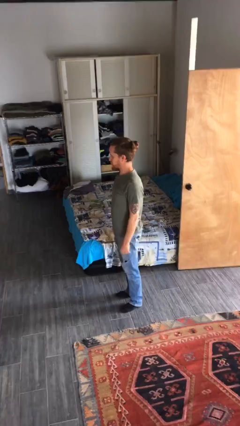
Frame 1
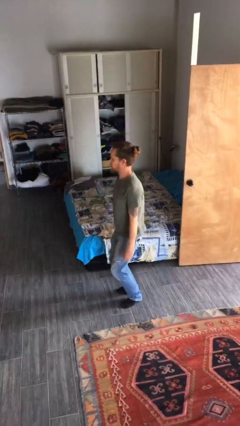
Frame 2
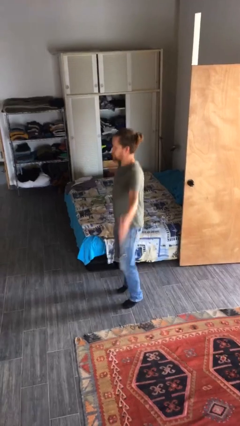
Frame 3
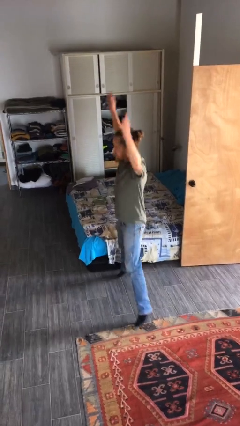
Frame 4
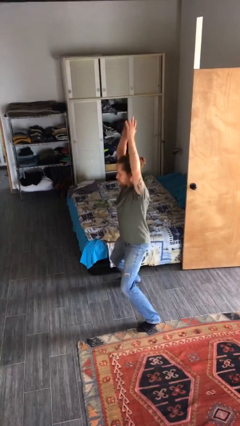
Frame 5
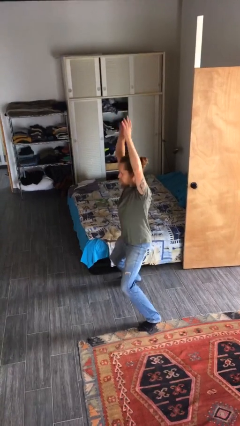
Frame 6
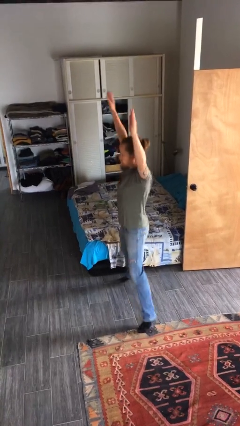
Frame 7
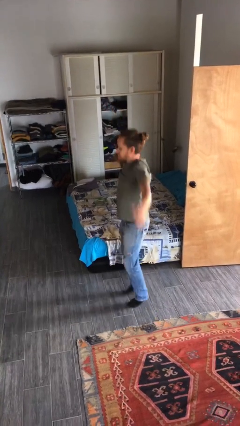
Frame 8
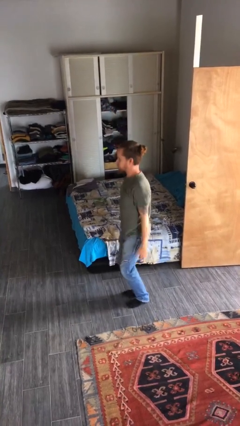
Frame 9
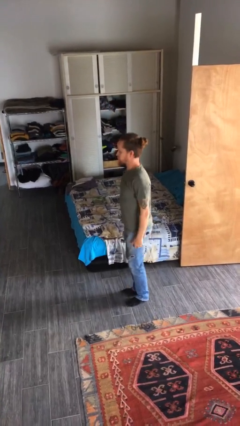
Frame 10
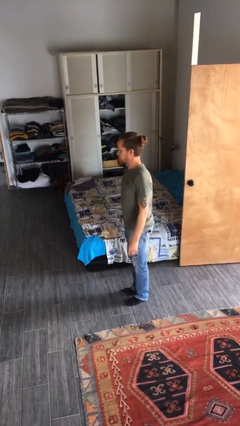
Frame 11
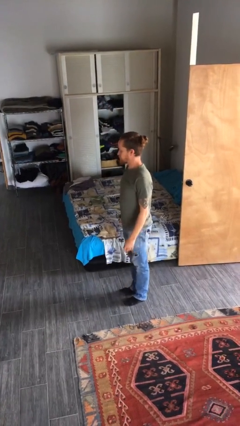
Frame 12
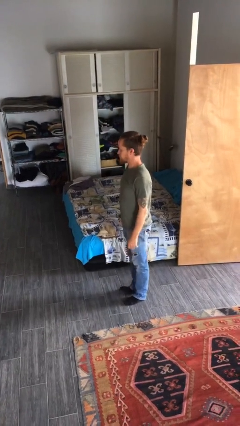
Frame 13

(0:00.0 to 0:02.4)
person exercises with jumping jacks

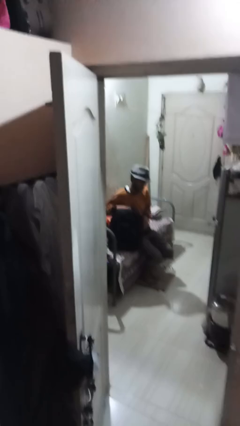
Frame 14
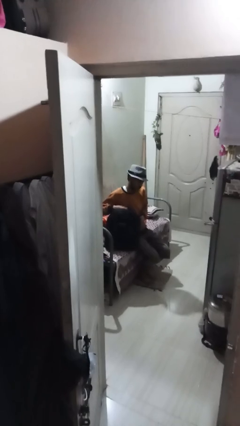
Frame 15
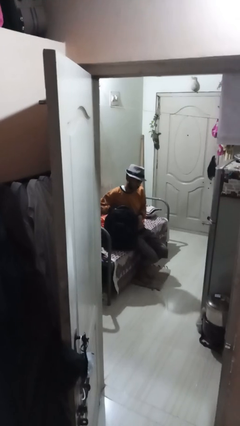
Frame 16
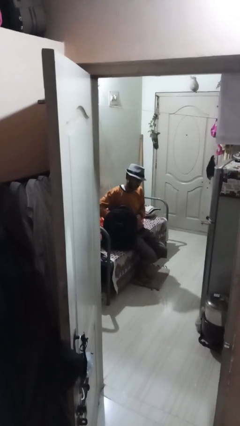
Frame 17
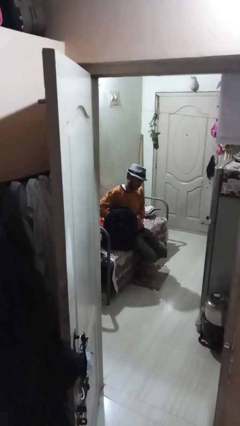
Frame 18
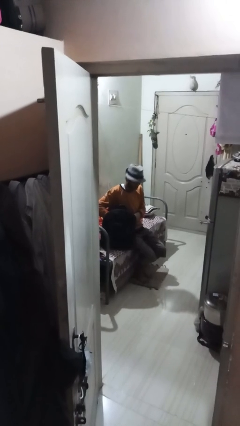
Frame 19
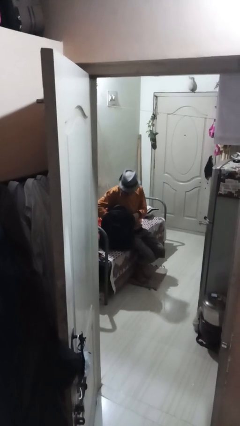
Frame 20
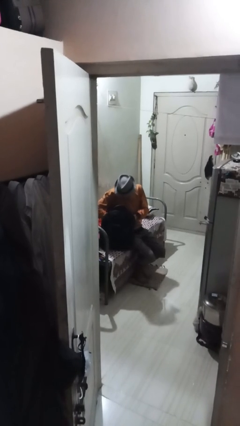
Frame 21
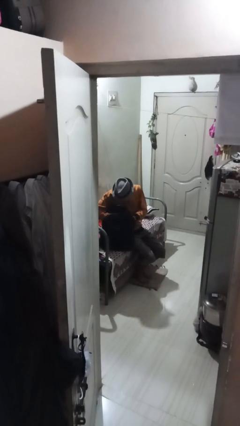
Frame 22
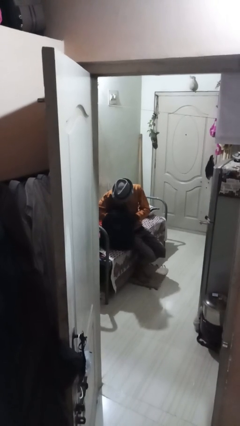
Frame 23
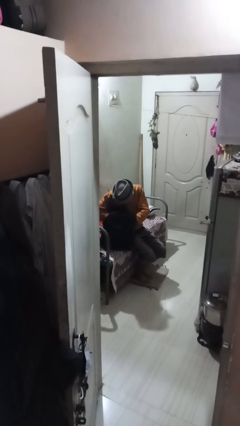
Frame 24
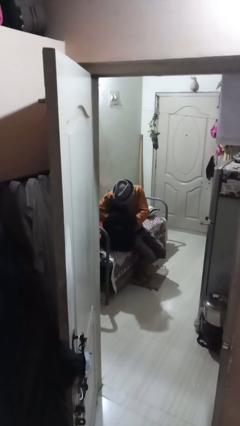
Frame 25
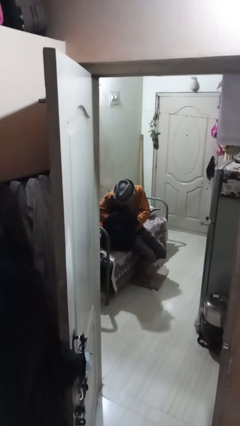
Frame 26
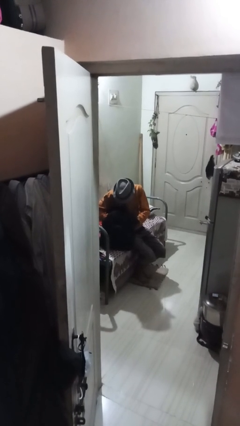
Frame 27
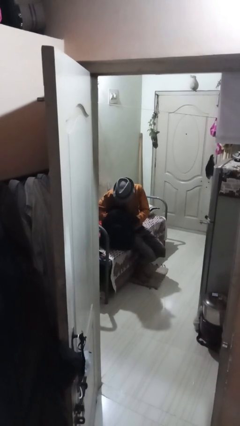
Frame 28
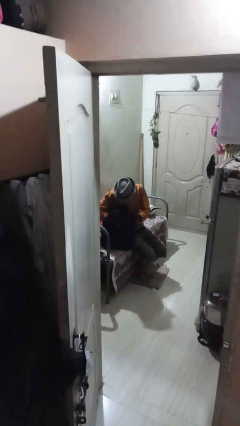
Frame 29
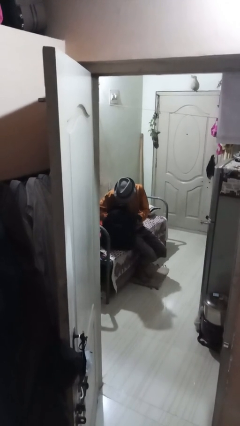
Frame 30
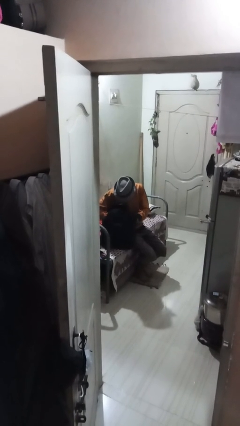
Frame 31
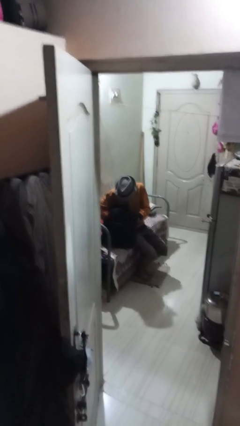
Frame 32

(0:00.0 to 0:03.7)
person searches in backpack

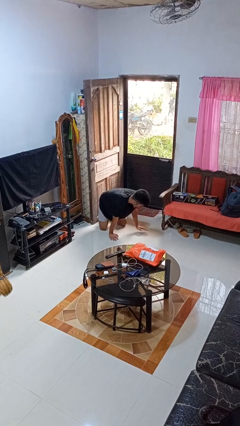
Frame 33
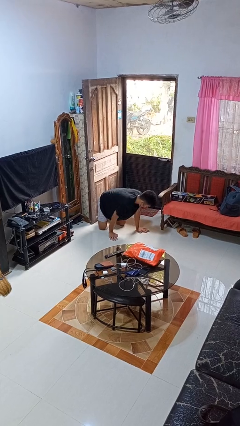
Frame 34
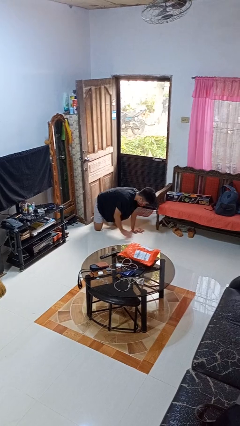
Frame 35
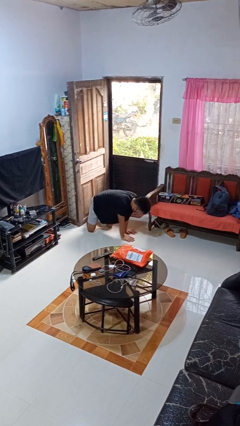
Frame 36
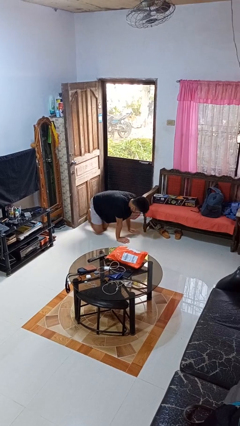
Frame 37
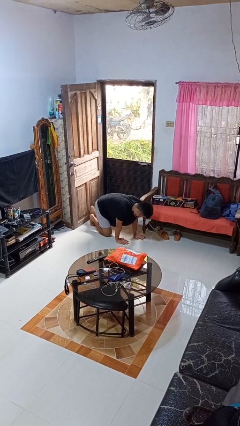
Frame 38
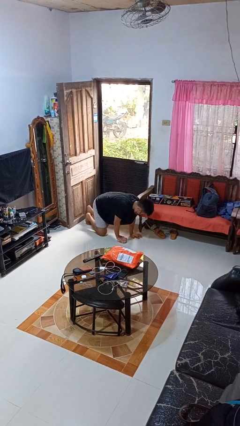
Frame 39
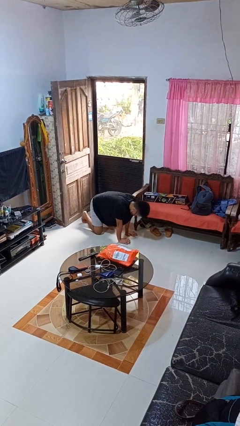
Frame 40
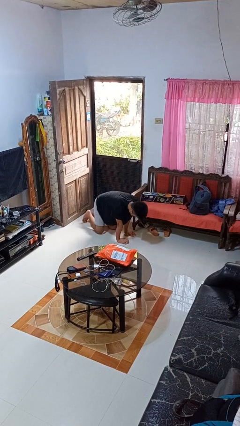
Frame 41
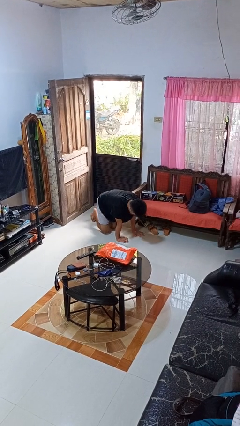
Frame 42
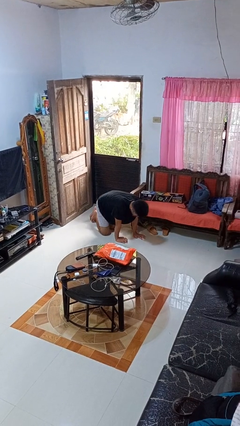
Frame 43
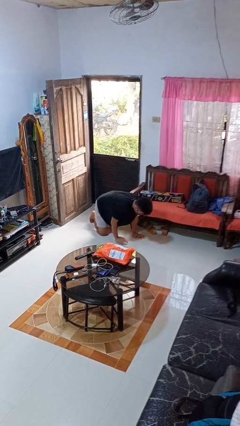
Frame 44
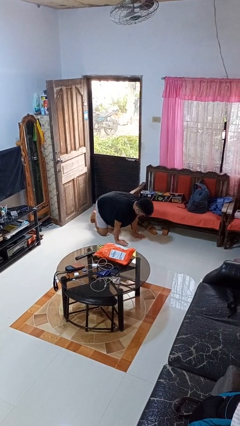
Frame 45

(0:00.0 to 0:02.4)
person crawls

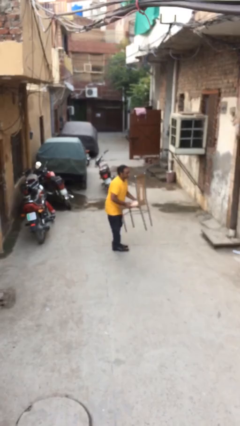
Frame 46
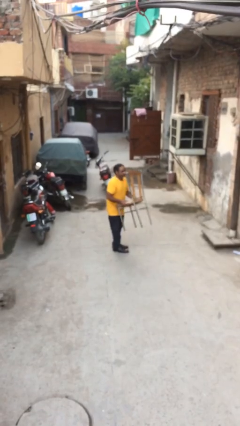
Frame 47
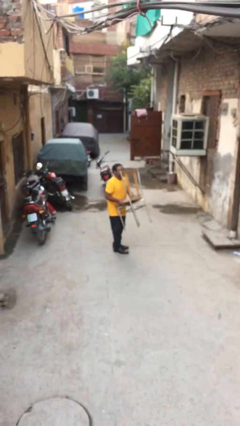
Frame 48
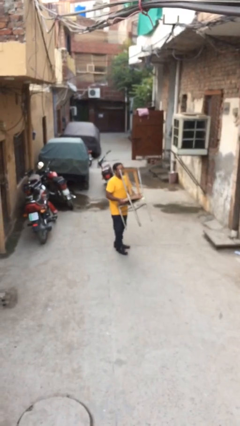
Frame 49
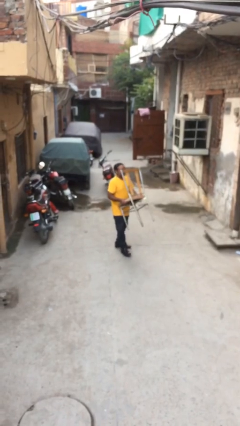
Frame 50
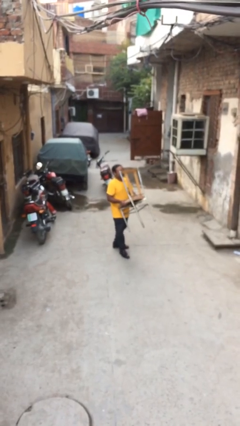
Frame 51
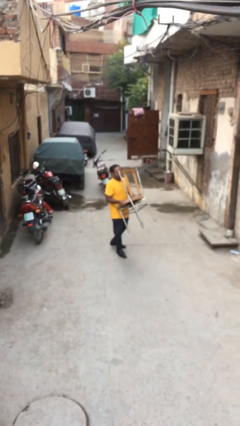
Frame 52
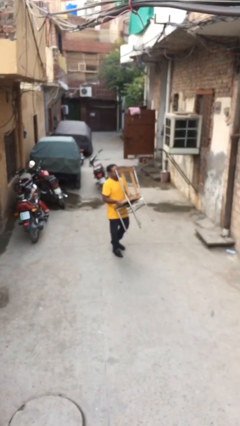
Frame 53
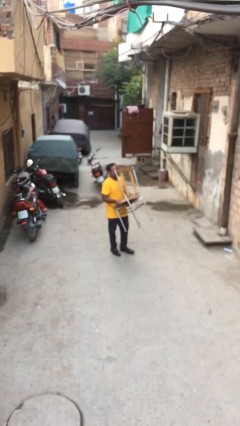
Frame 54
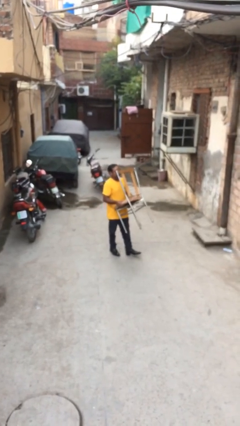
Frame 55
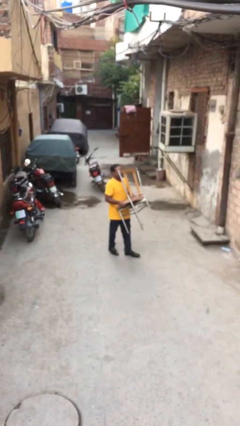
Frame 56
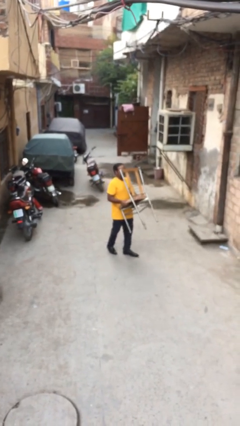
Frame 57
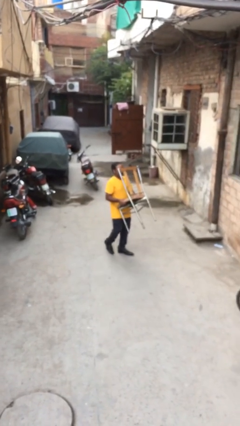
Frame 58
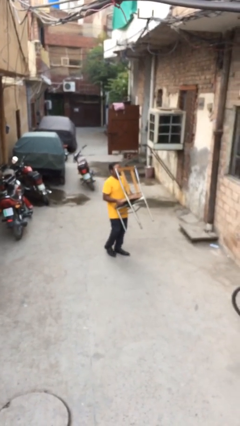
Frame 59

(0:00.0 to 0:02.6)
person carries heavy object

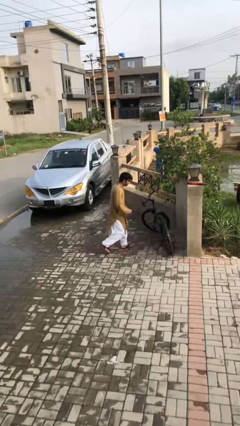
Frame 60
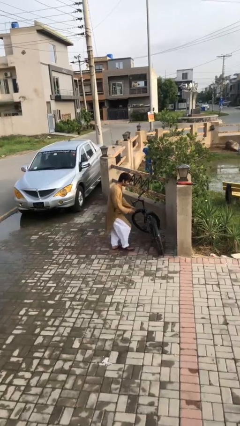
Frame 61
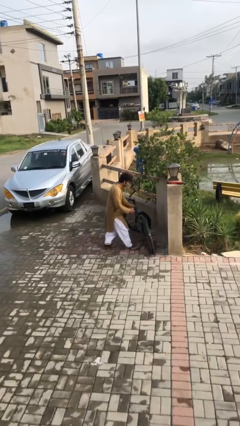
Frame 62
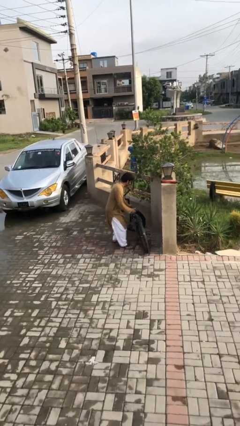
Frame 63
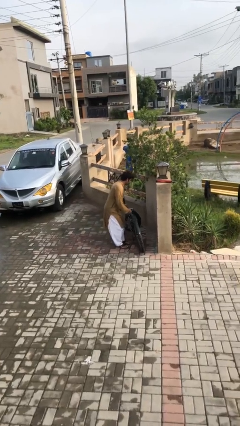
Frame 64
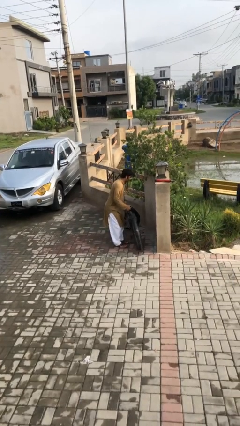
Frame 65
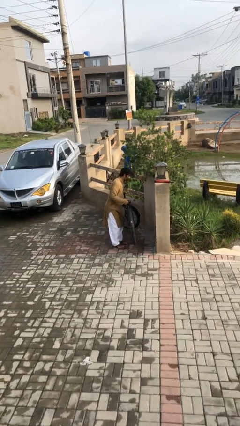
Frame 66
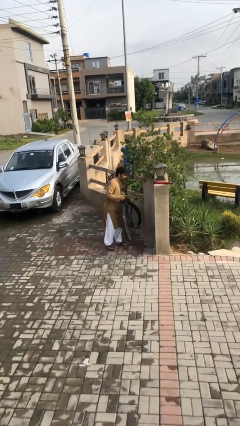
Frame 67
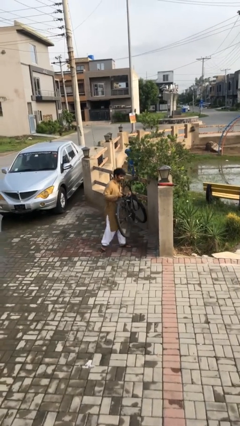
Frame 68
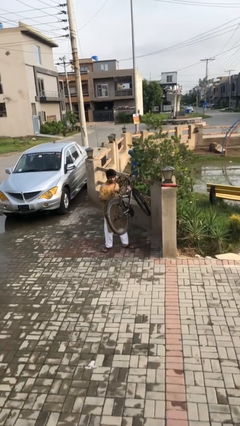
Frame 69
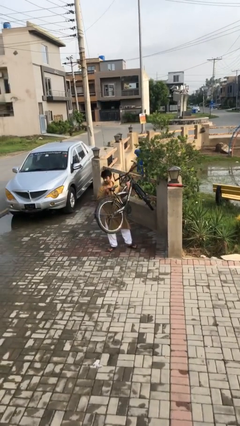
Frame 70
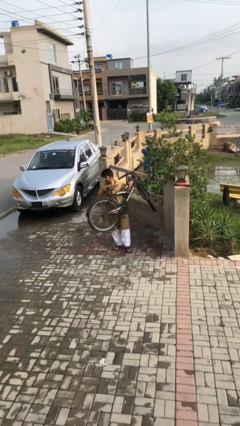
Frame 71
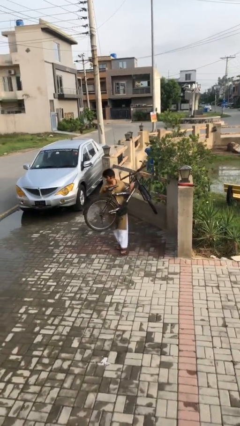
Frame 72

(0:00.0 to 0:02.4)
person picks up object from floor

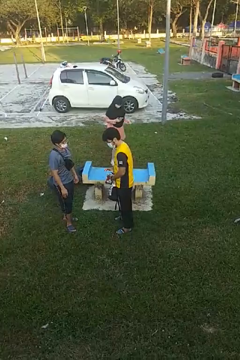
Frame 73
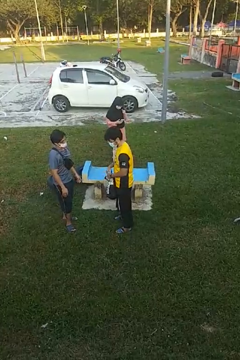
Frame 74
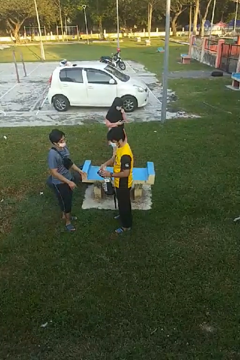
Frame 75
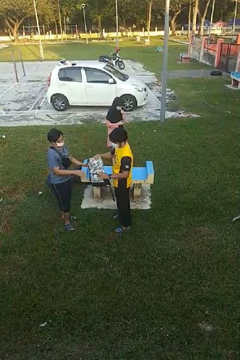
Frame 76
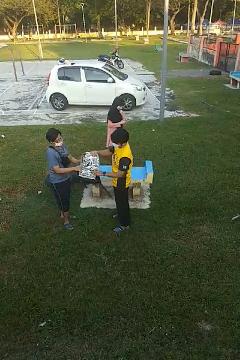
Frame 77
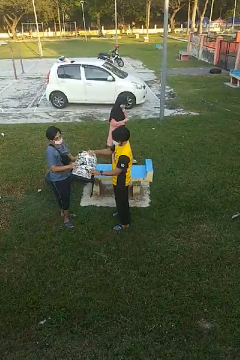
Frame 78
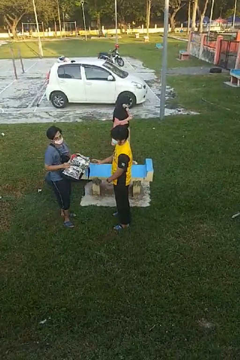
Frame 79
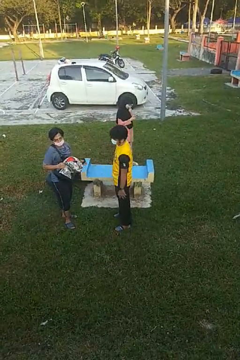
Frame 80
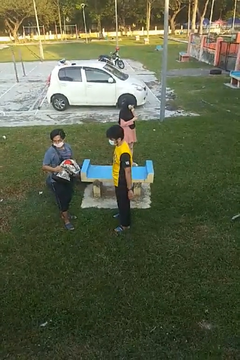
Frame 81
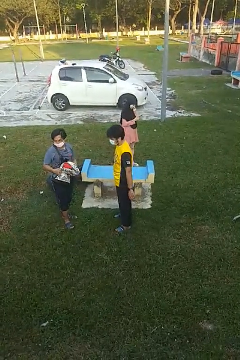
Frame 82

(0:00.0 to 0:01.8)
person transfers object to person

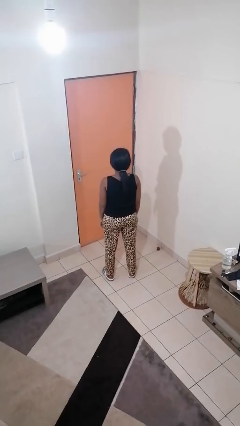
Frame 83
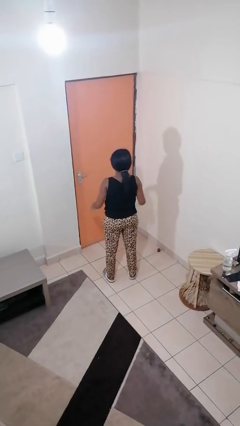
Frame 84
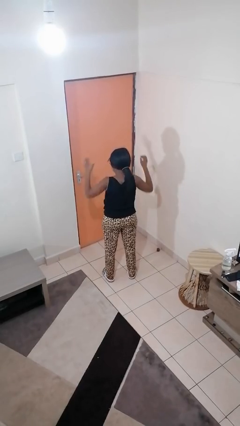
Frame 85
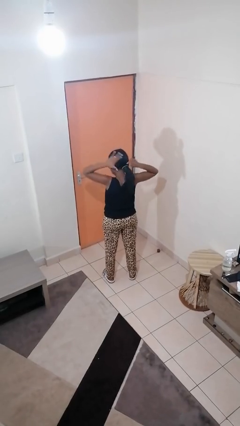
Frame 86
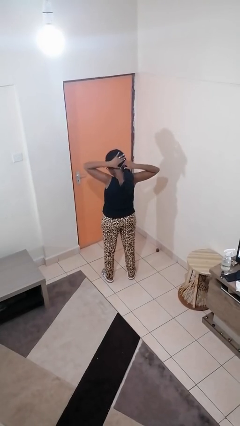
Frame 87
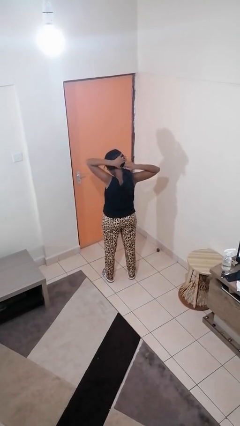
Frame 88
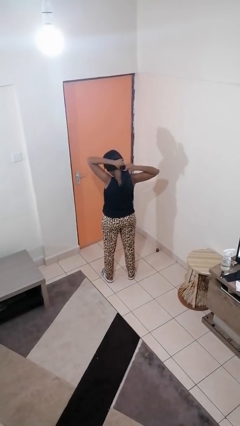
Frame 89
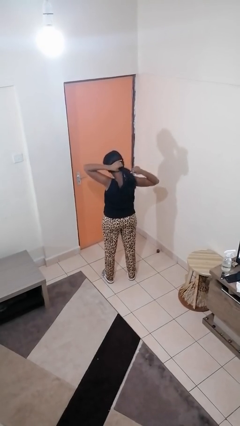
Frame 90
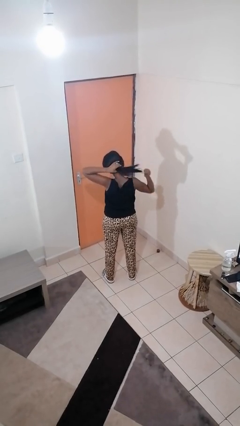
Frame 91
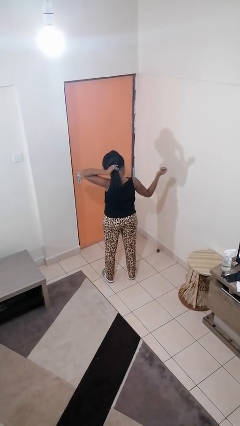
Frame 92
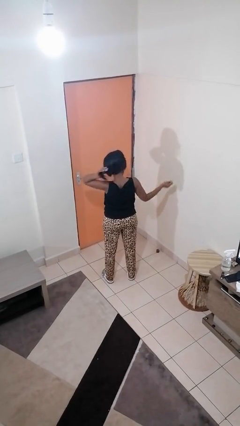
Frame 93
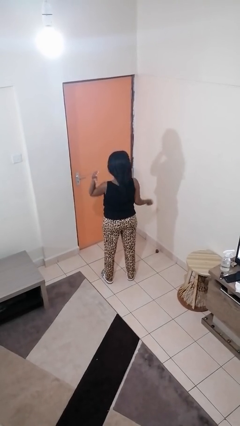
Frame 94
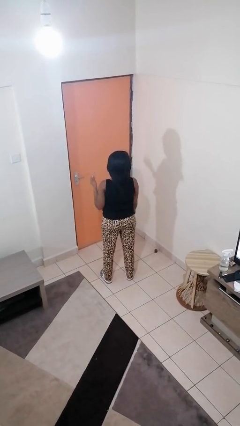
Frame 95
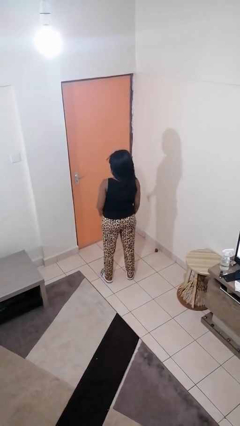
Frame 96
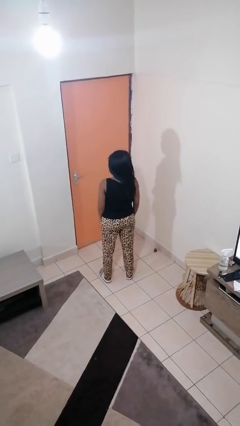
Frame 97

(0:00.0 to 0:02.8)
person takes off hairtie
